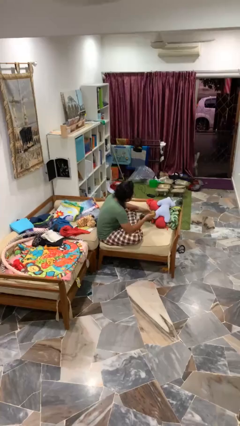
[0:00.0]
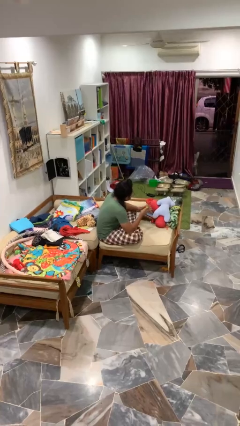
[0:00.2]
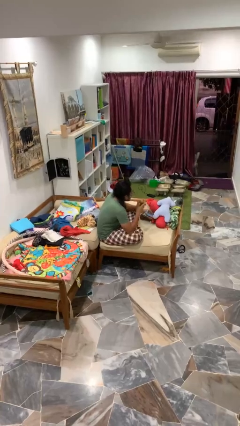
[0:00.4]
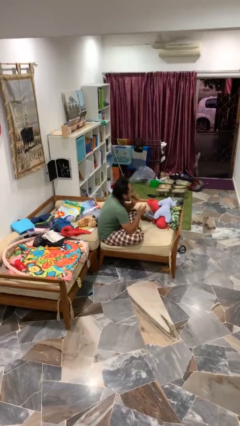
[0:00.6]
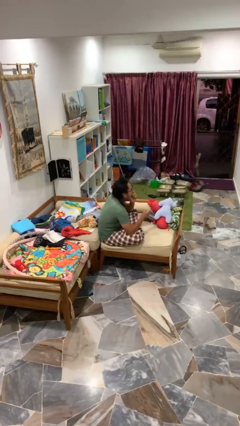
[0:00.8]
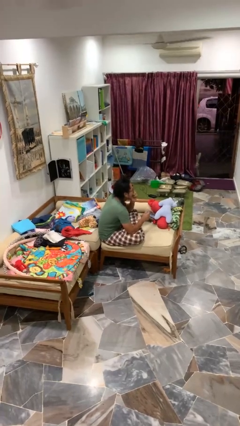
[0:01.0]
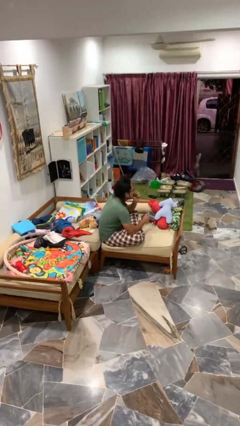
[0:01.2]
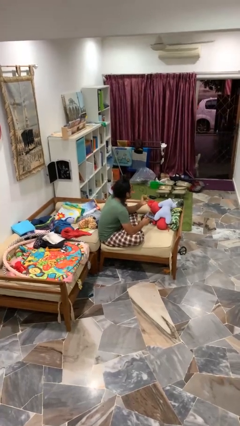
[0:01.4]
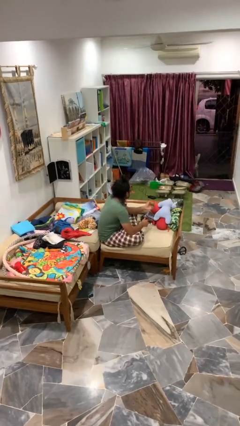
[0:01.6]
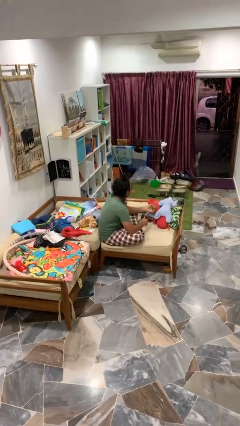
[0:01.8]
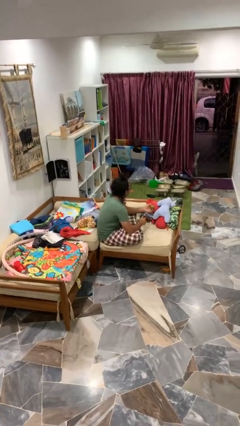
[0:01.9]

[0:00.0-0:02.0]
person eats apple

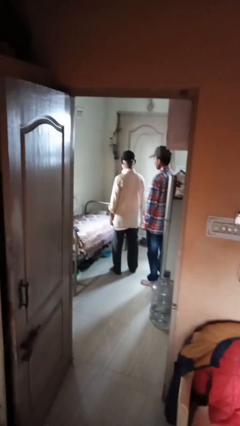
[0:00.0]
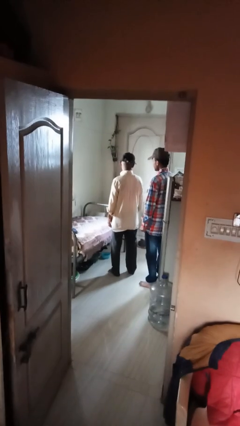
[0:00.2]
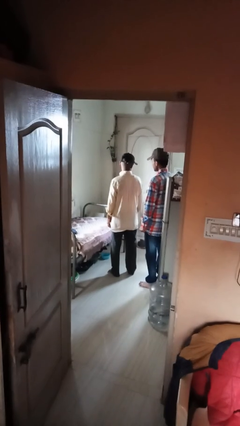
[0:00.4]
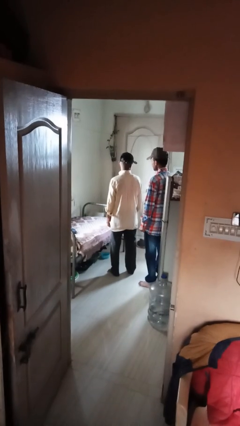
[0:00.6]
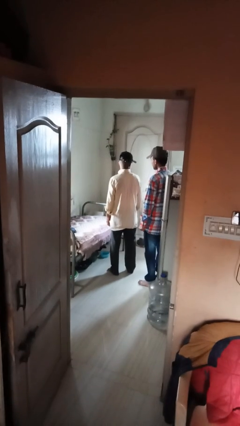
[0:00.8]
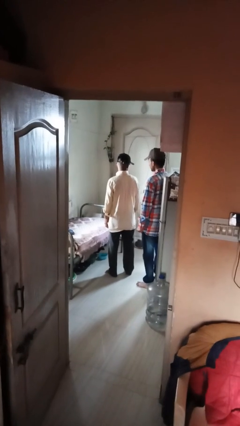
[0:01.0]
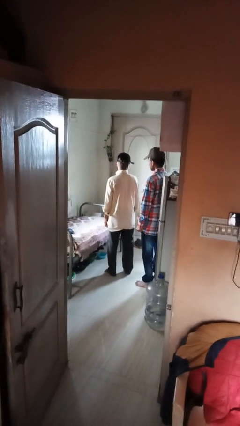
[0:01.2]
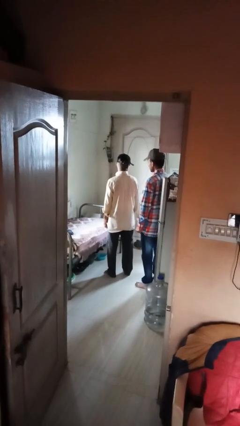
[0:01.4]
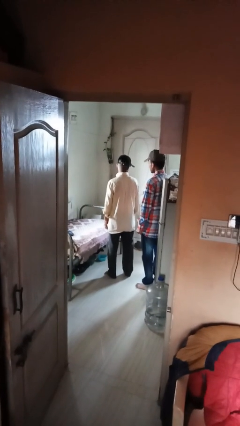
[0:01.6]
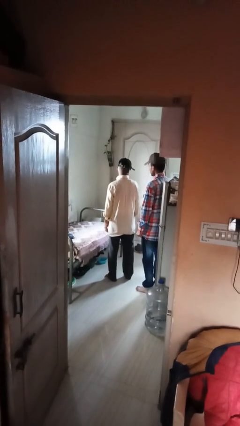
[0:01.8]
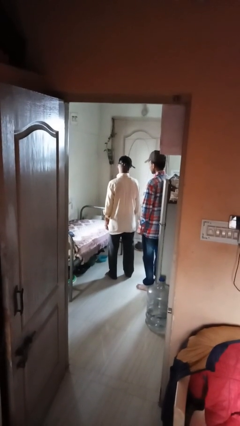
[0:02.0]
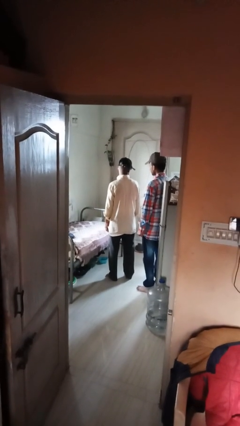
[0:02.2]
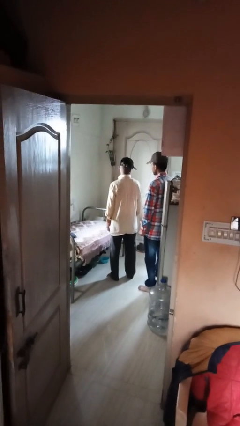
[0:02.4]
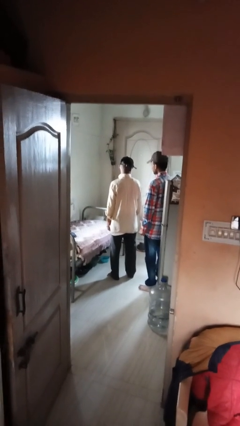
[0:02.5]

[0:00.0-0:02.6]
person looks over shoulder

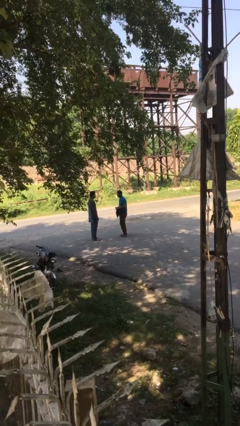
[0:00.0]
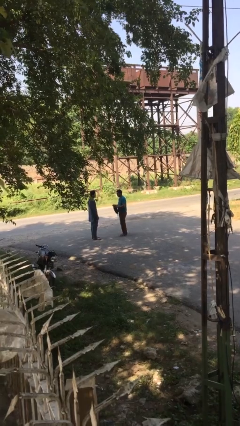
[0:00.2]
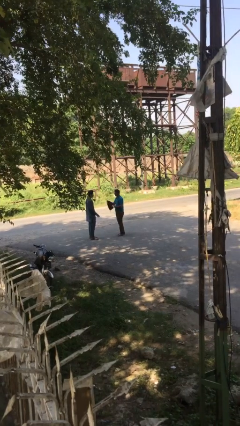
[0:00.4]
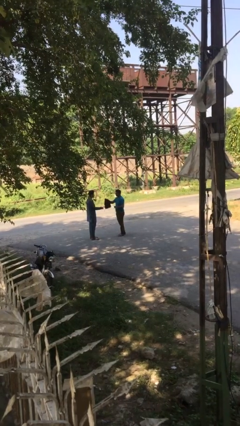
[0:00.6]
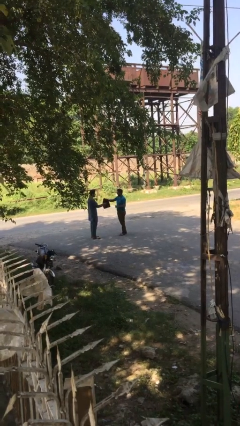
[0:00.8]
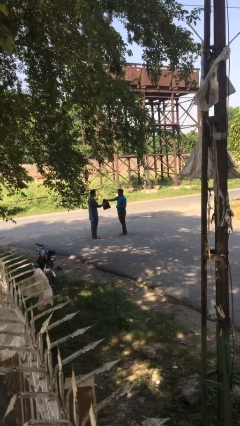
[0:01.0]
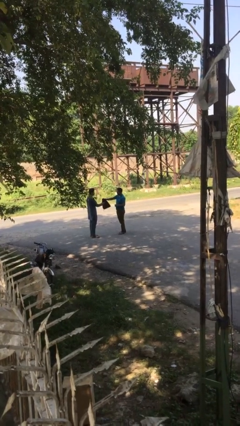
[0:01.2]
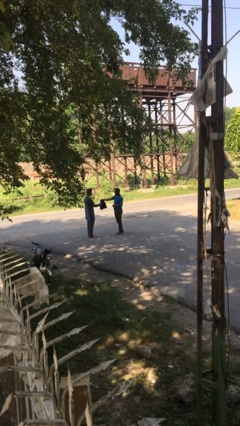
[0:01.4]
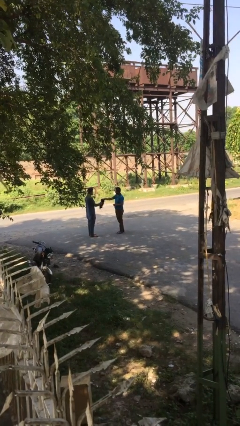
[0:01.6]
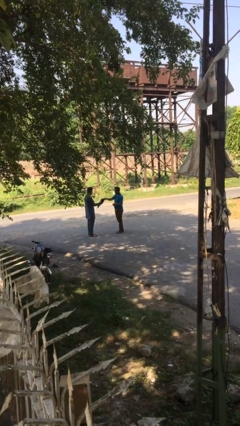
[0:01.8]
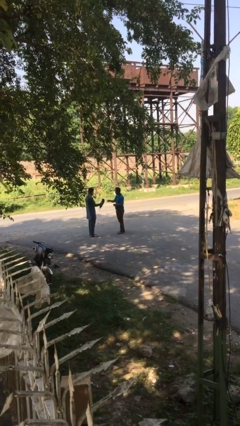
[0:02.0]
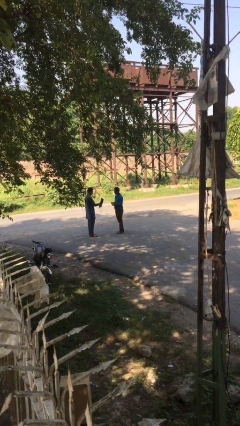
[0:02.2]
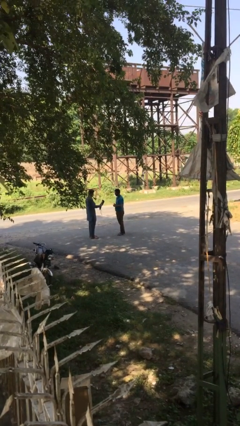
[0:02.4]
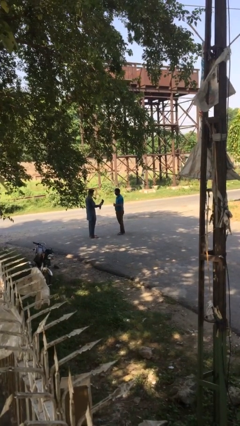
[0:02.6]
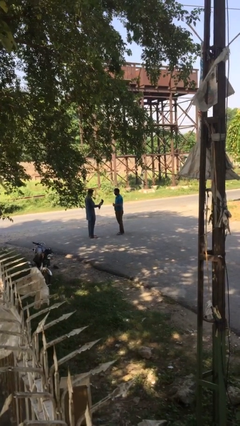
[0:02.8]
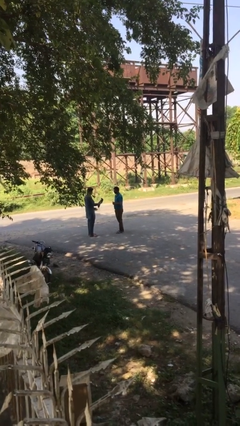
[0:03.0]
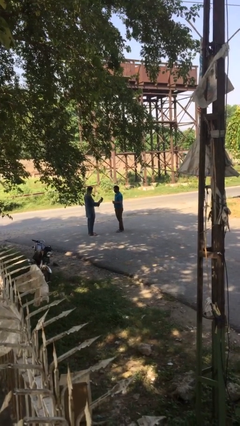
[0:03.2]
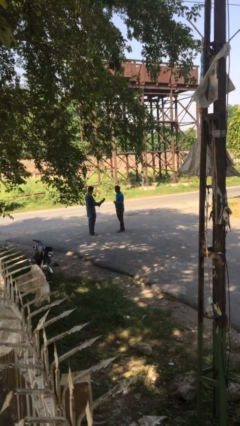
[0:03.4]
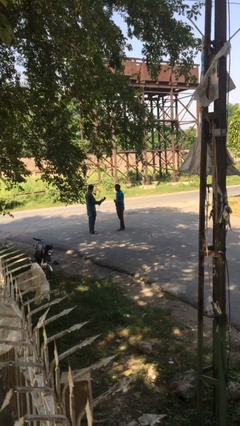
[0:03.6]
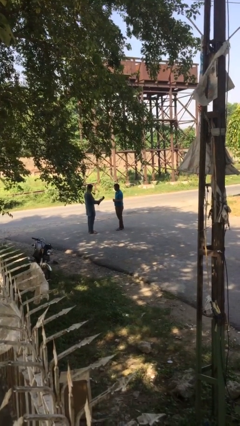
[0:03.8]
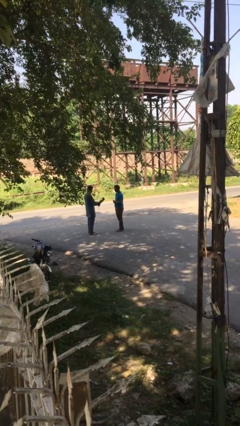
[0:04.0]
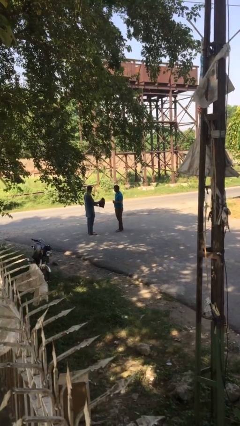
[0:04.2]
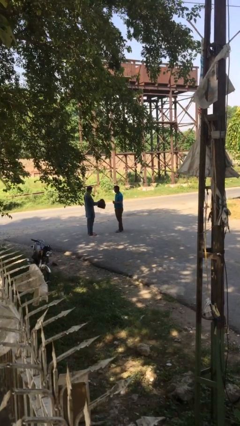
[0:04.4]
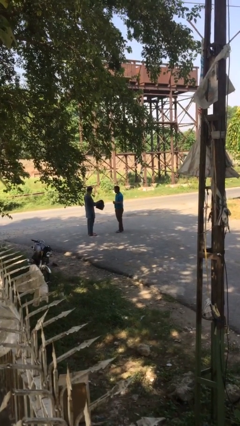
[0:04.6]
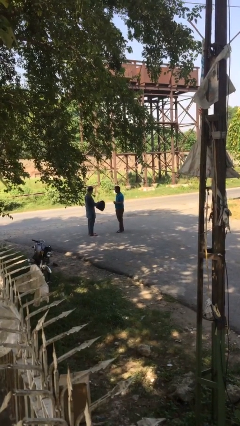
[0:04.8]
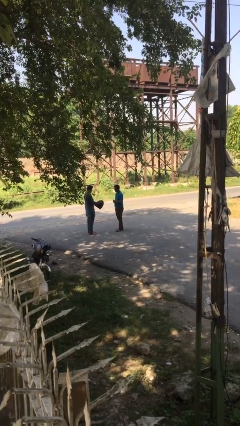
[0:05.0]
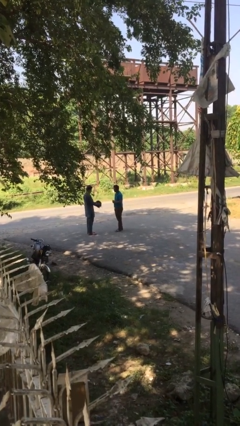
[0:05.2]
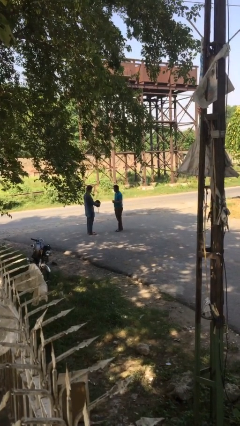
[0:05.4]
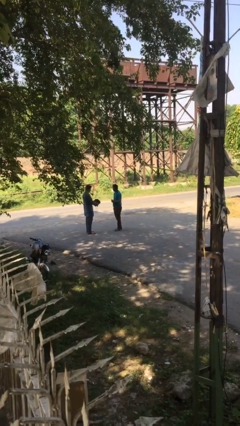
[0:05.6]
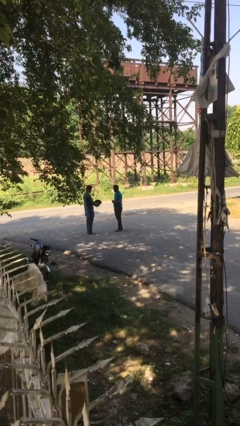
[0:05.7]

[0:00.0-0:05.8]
person transfers object to person

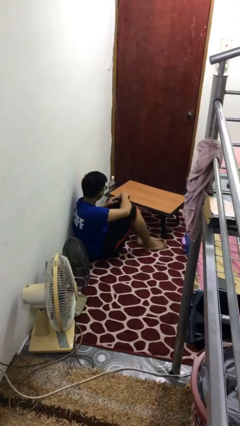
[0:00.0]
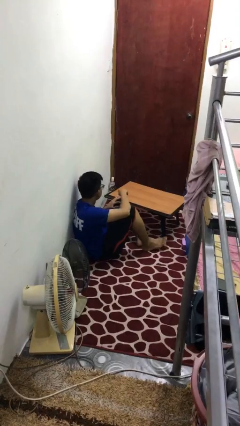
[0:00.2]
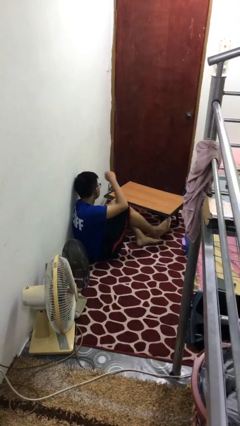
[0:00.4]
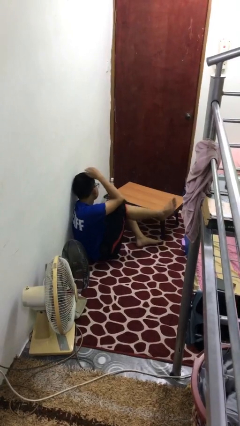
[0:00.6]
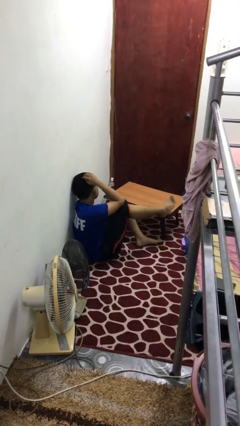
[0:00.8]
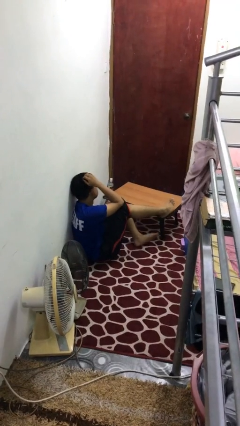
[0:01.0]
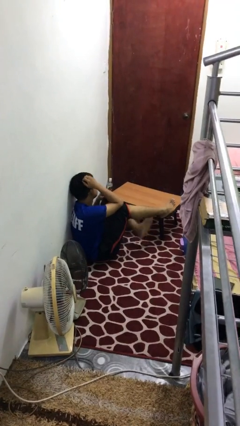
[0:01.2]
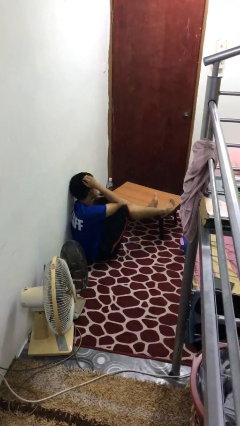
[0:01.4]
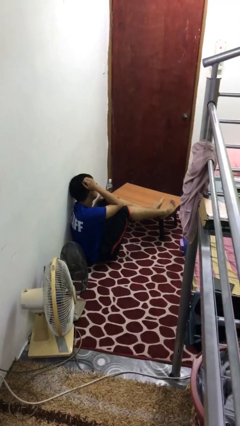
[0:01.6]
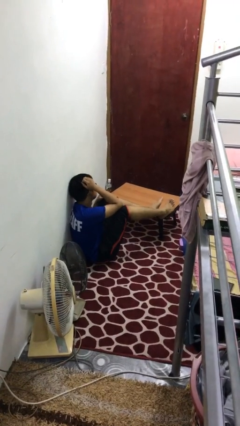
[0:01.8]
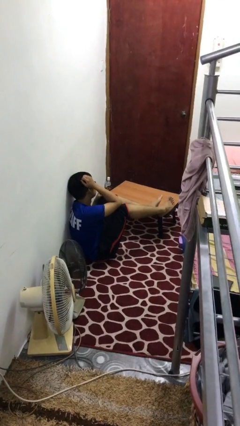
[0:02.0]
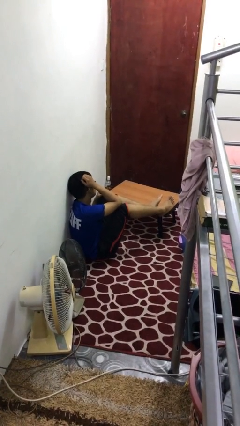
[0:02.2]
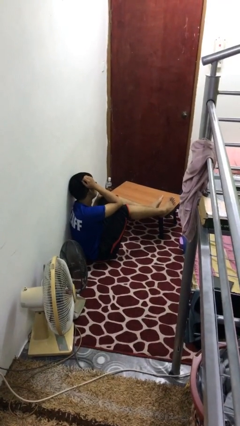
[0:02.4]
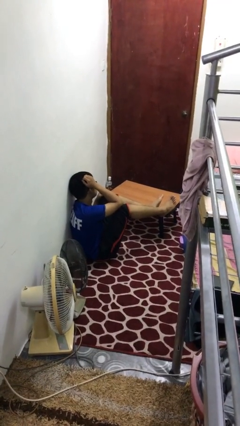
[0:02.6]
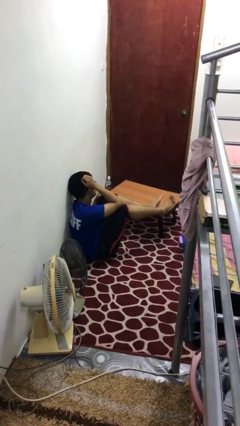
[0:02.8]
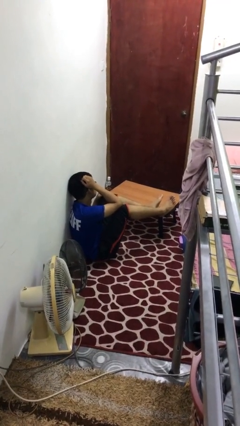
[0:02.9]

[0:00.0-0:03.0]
person puts feet up

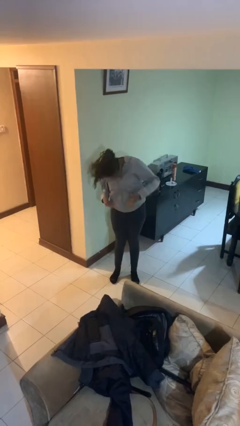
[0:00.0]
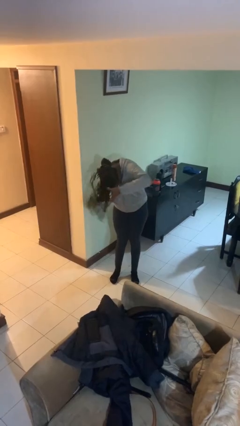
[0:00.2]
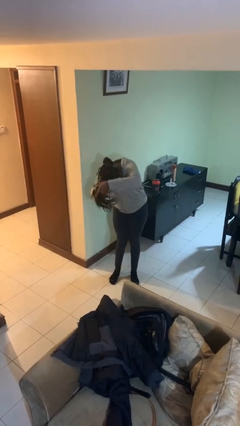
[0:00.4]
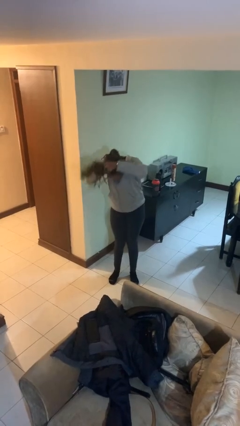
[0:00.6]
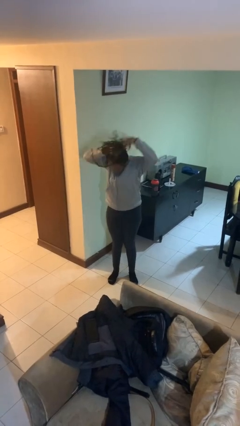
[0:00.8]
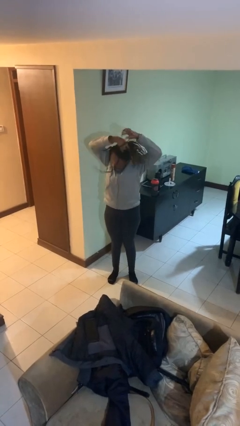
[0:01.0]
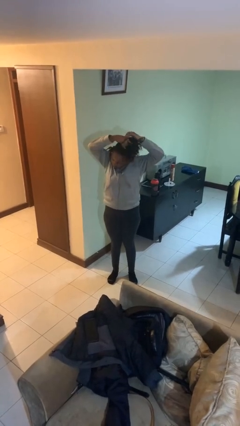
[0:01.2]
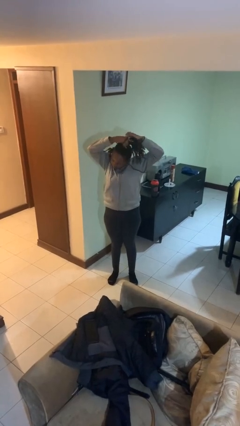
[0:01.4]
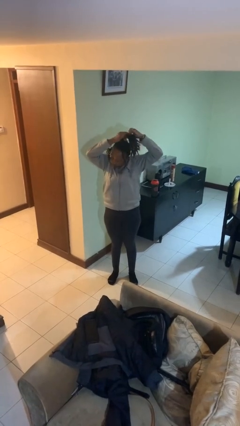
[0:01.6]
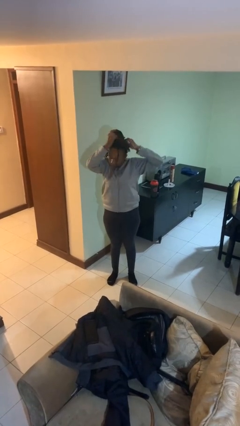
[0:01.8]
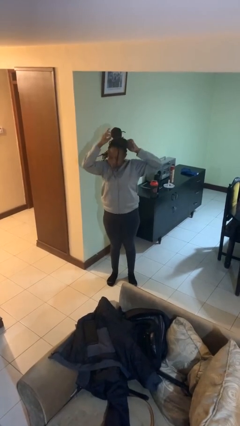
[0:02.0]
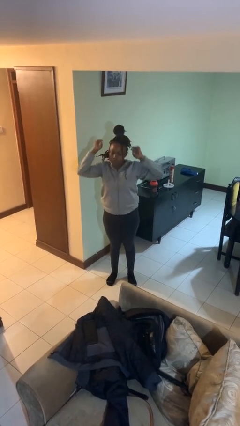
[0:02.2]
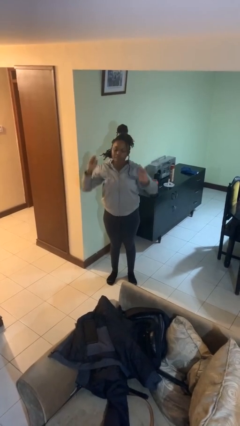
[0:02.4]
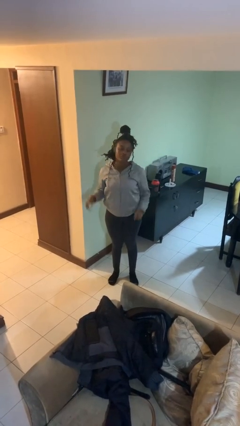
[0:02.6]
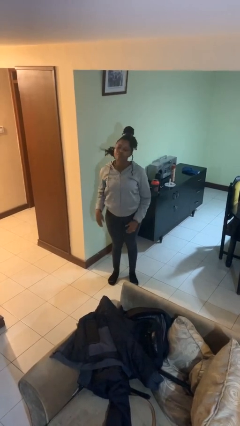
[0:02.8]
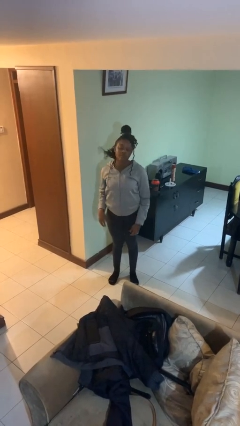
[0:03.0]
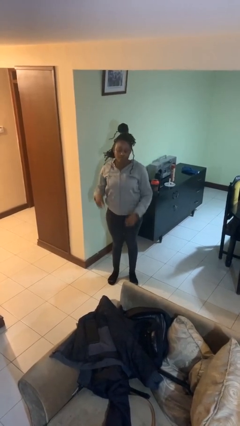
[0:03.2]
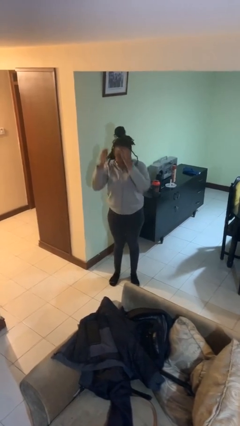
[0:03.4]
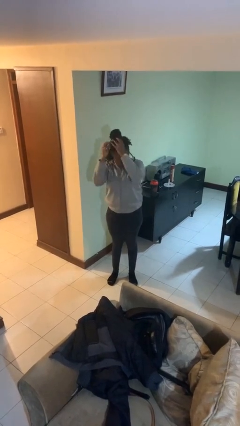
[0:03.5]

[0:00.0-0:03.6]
person puts hair in ponytail

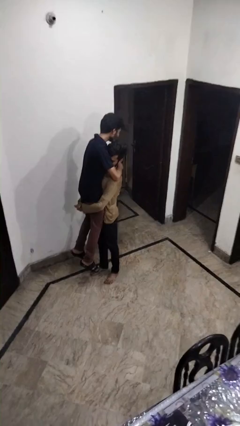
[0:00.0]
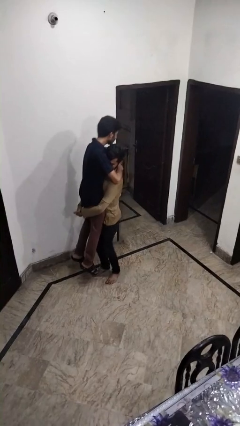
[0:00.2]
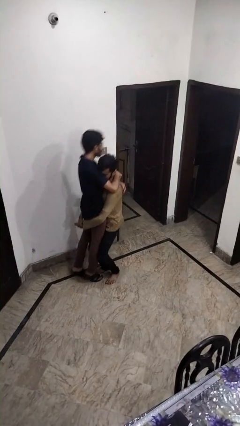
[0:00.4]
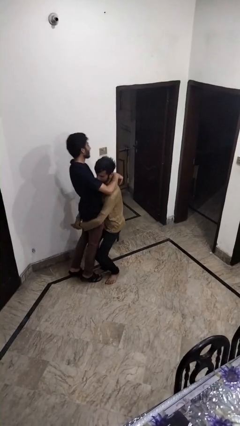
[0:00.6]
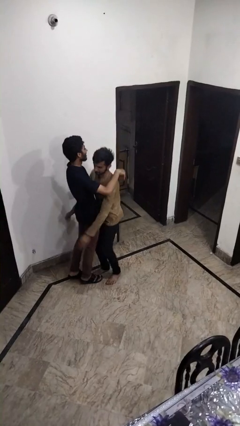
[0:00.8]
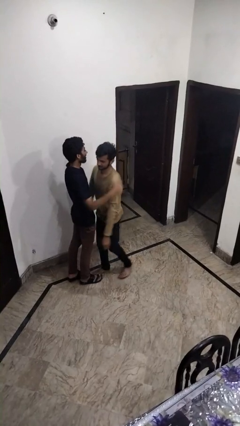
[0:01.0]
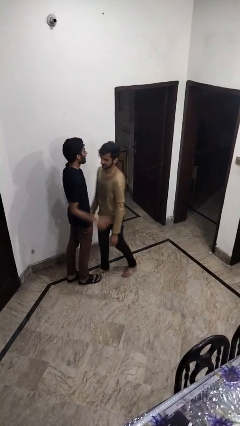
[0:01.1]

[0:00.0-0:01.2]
person puts down person
